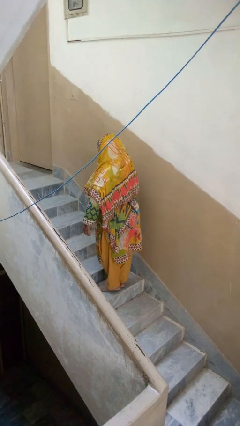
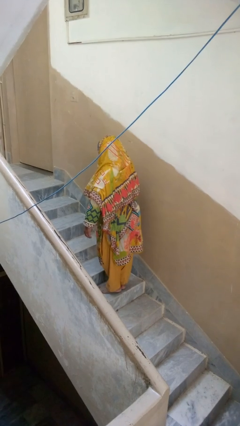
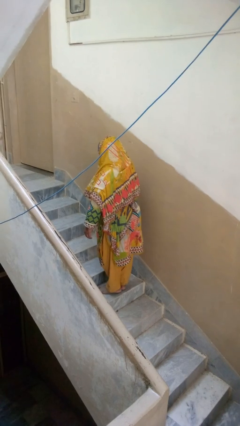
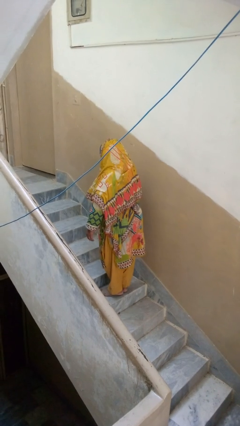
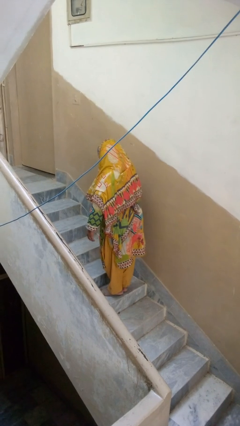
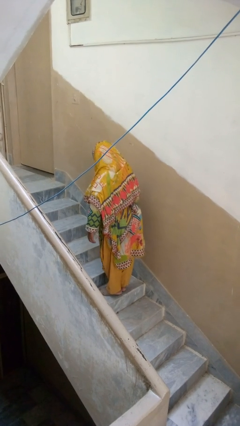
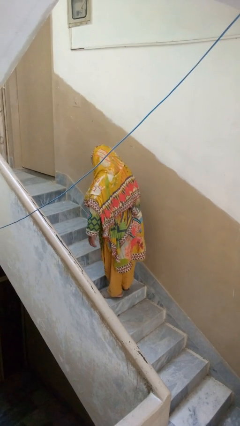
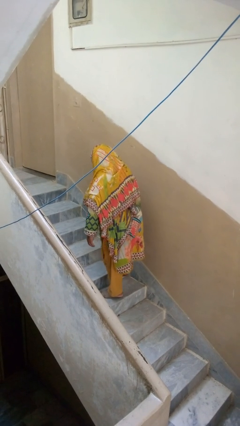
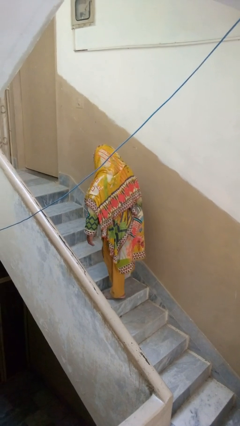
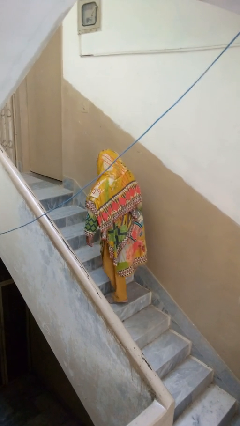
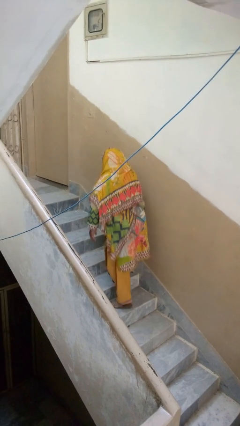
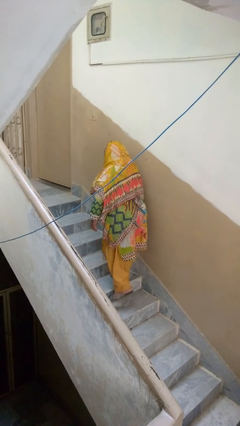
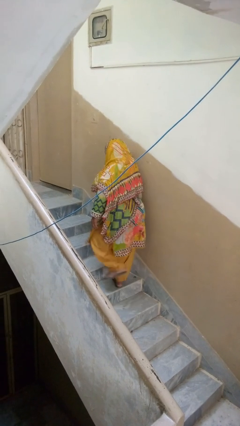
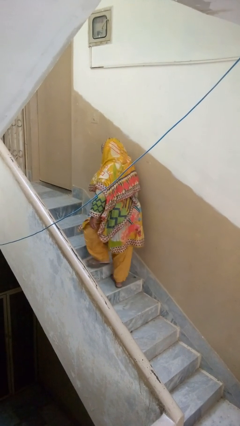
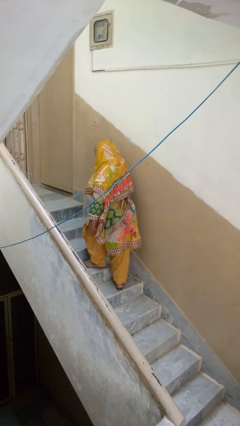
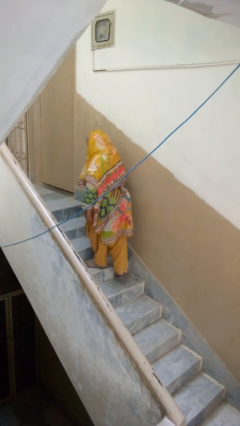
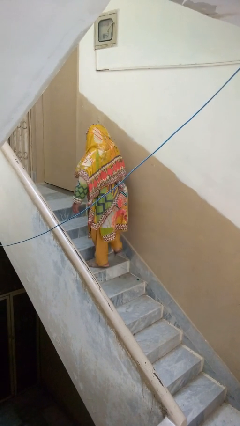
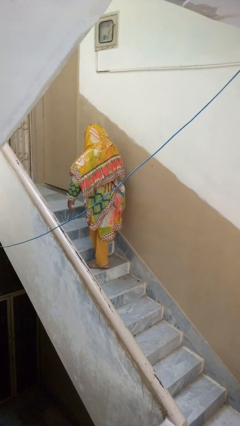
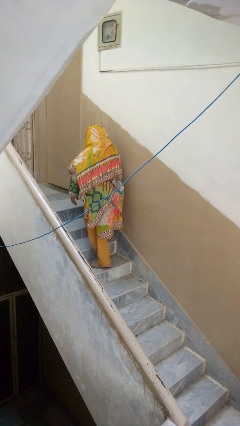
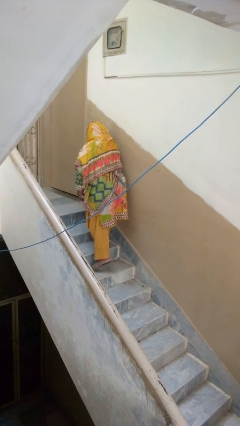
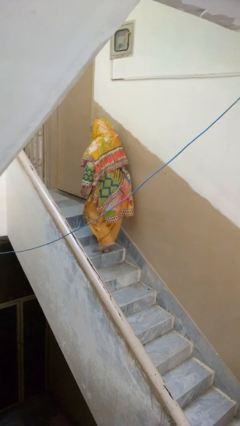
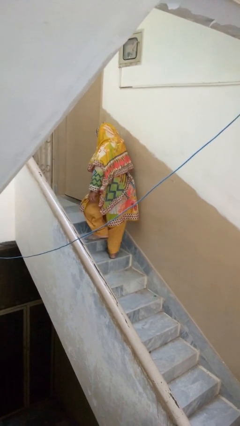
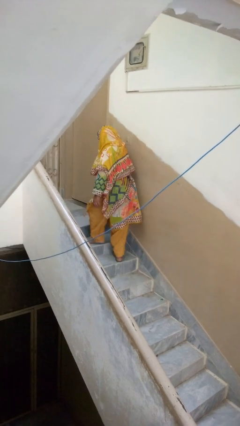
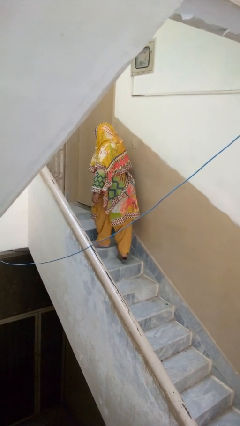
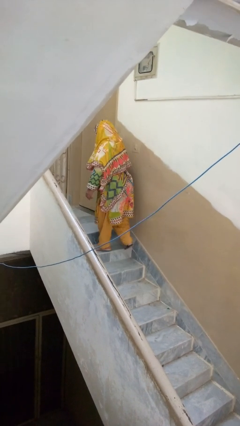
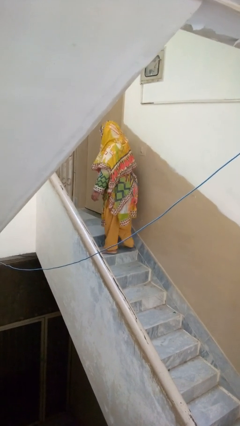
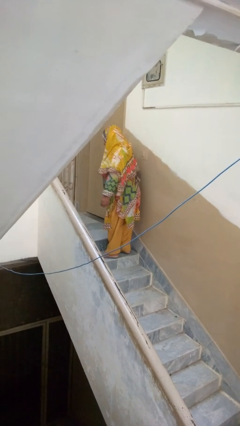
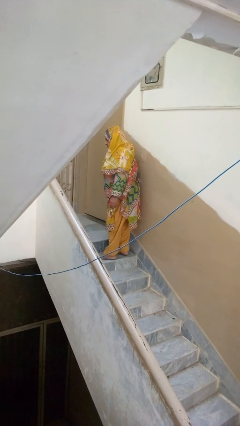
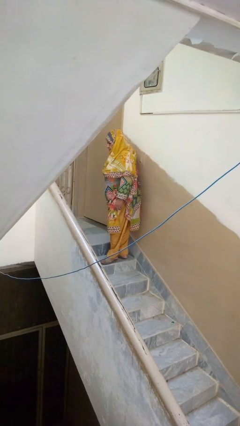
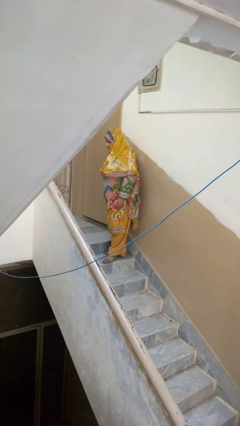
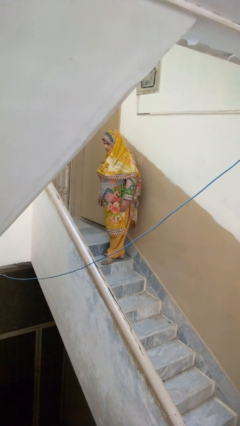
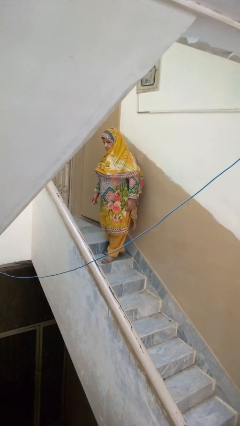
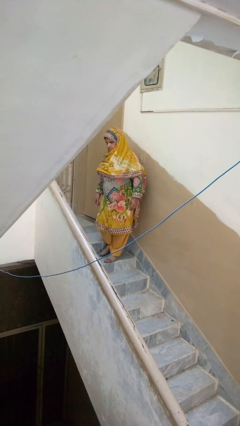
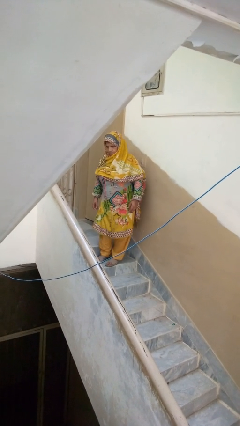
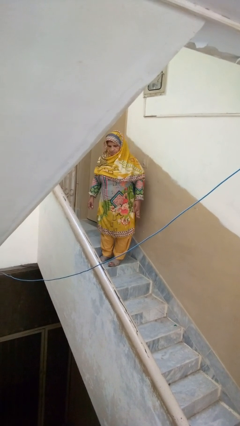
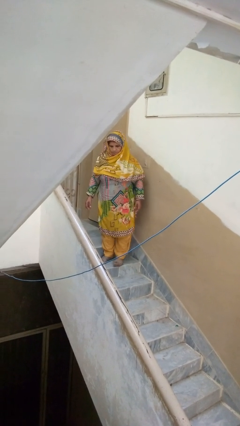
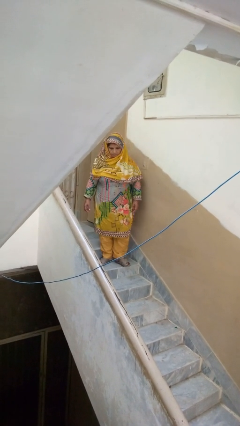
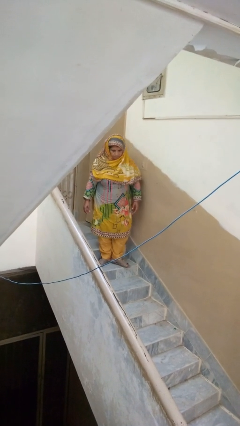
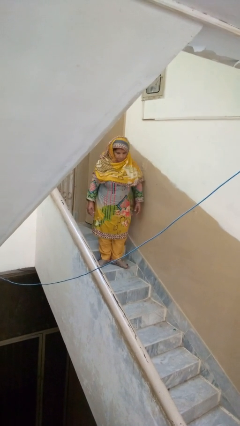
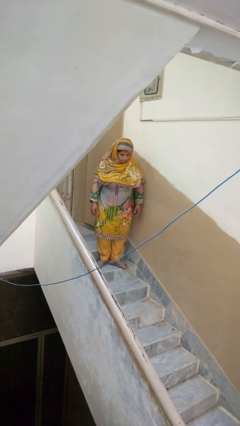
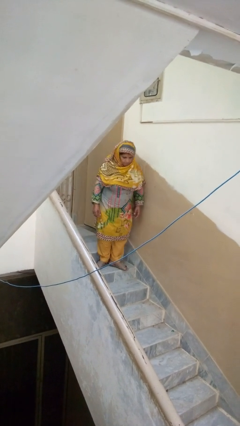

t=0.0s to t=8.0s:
person climbs up stairs

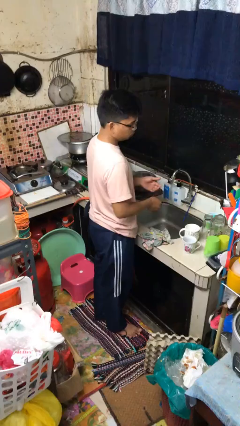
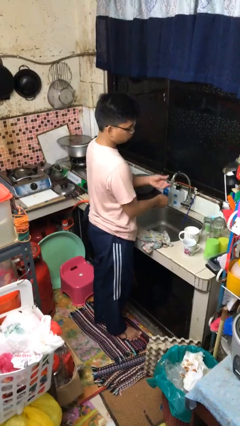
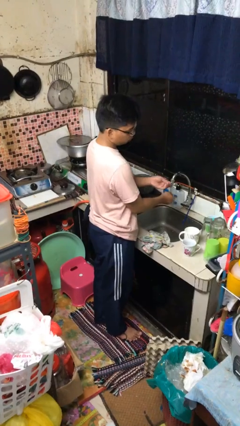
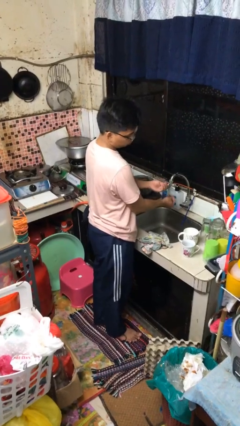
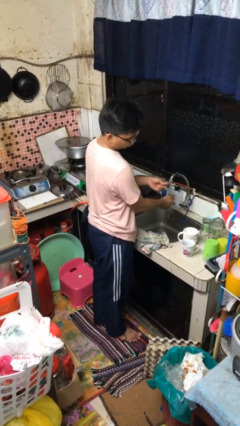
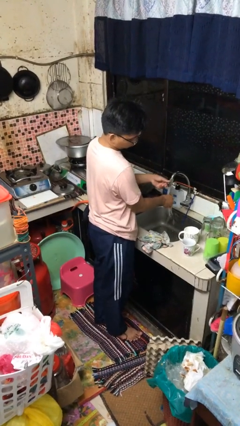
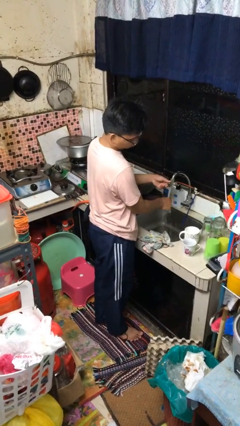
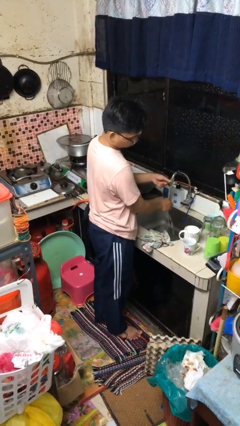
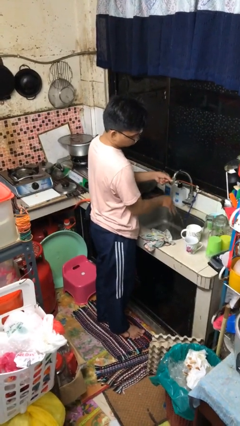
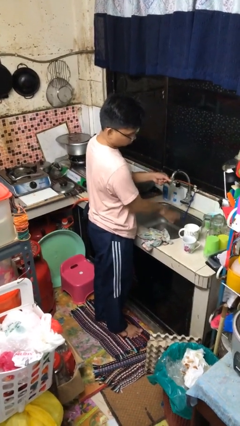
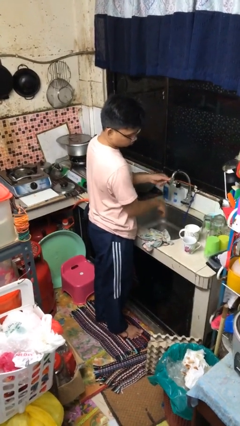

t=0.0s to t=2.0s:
person washes hands

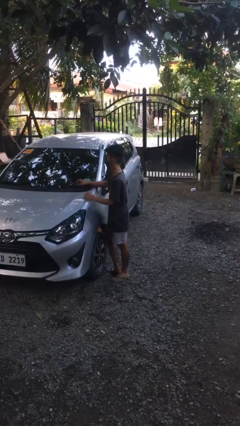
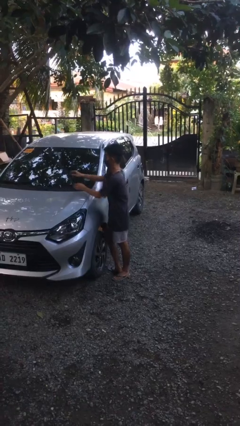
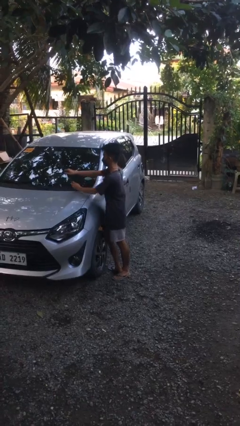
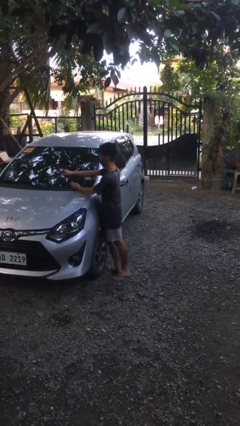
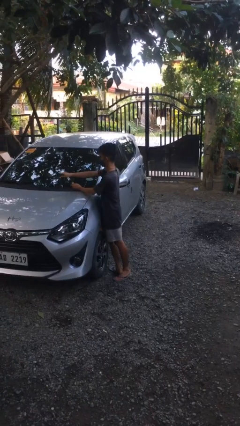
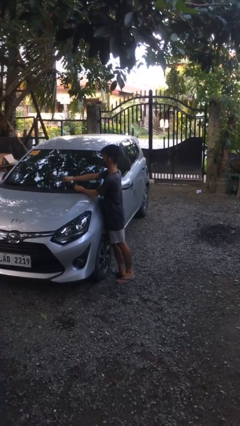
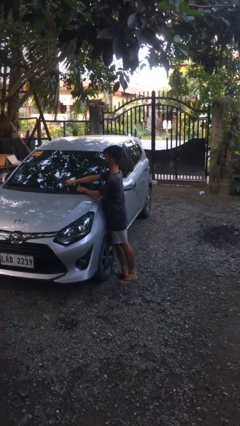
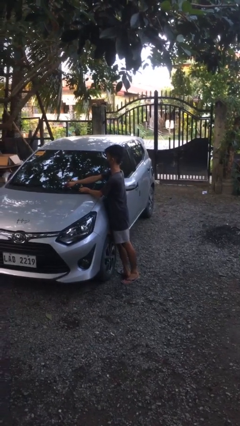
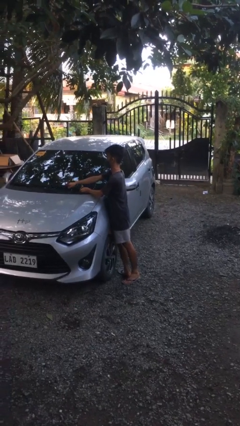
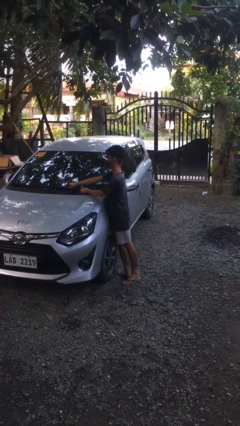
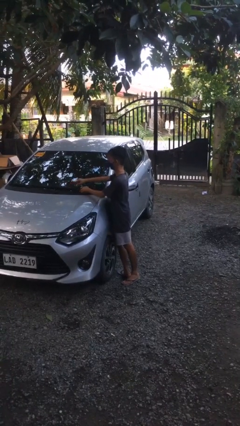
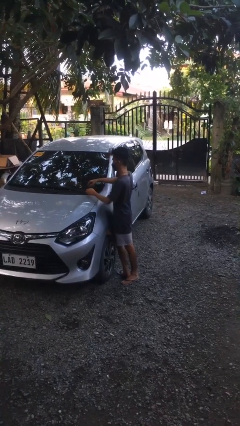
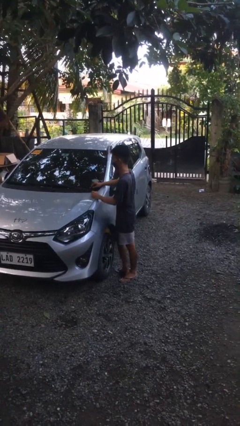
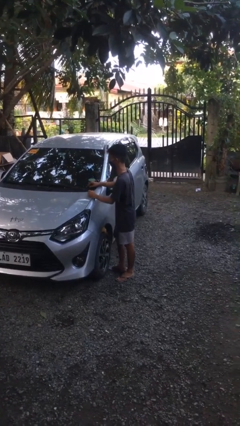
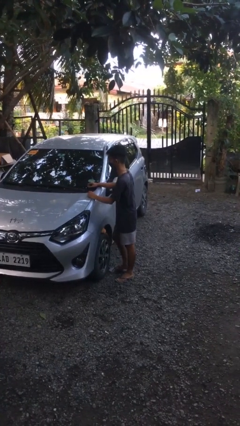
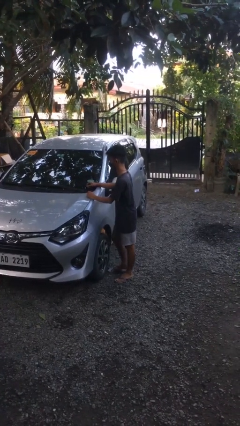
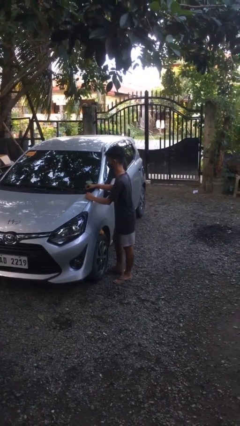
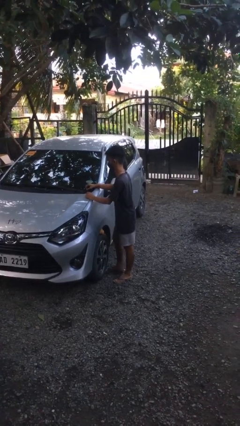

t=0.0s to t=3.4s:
person flips down car wipers

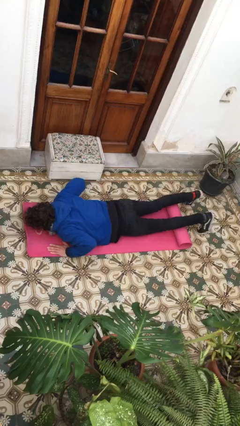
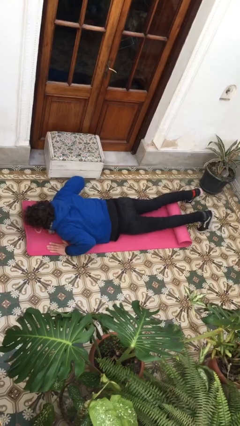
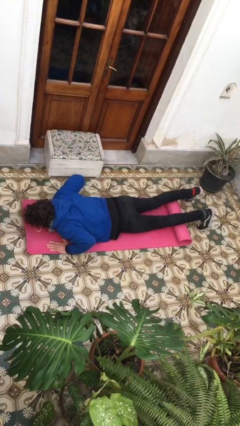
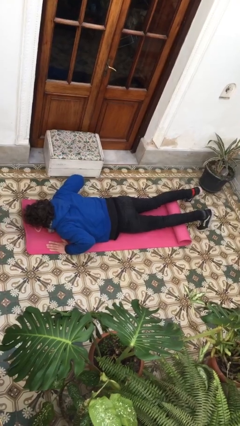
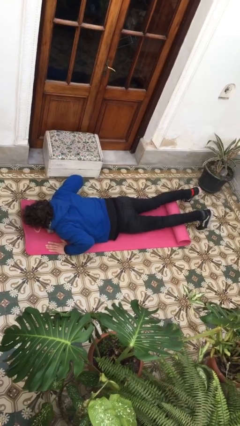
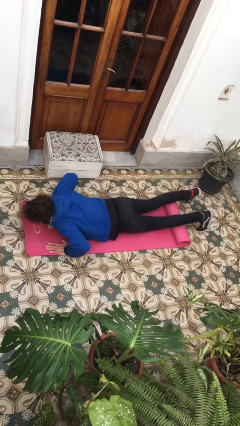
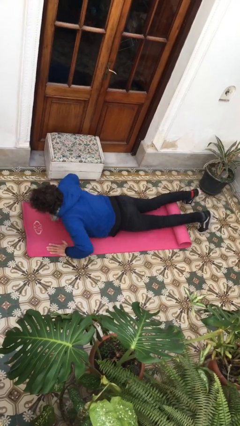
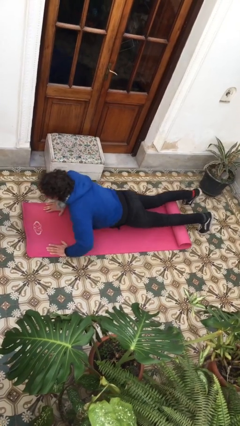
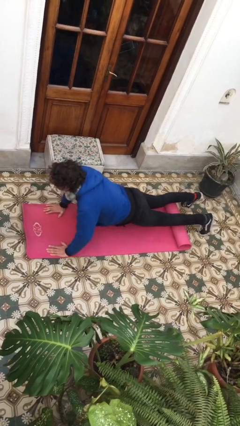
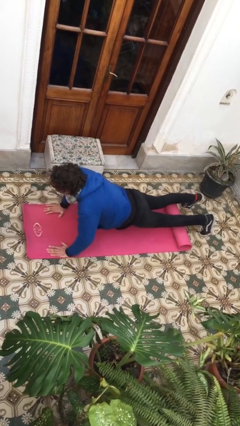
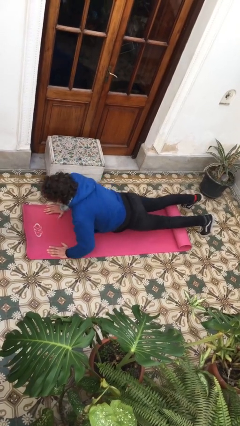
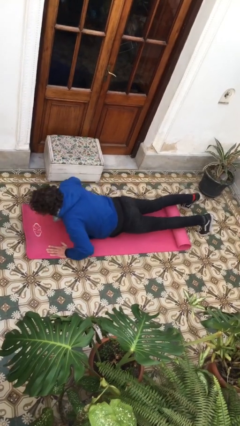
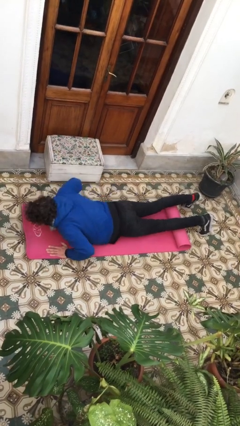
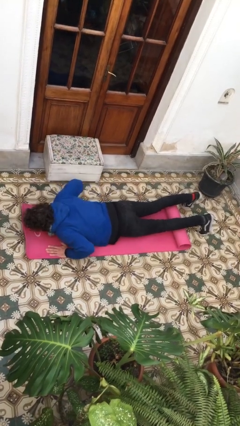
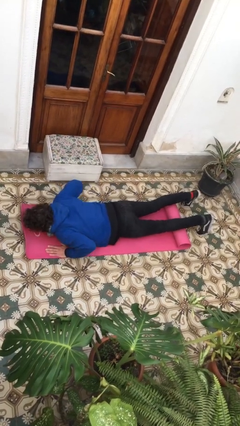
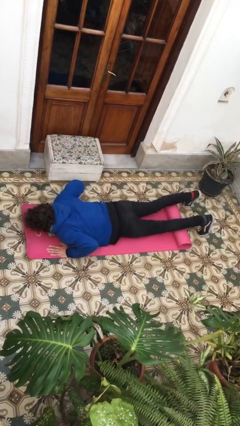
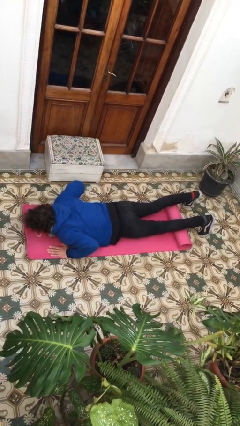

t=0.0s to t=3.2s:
person exercises with pushup

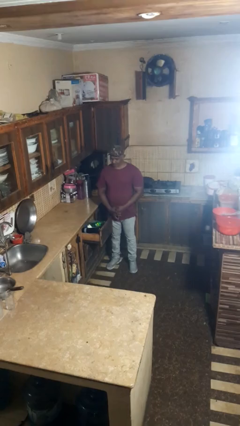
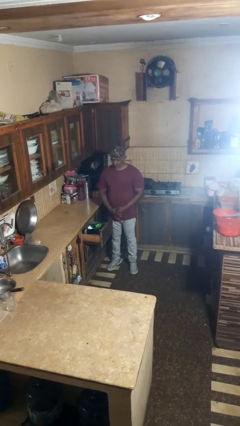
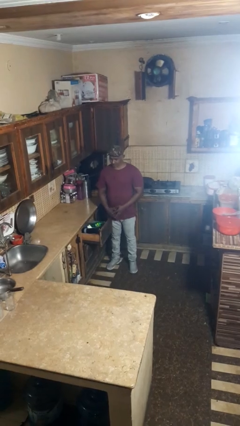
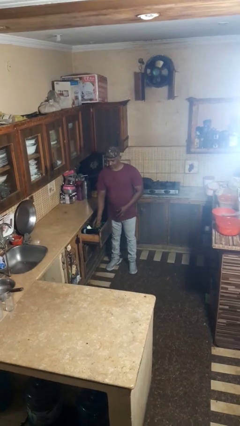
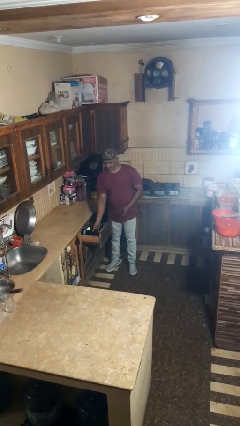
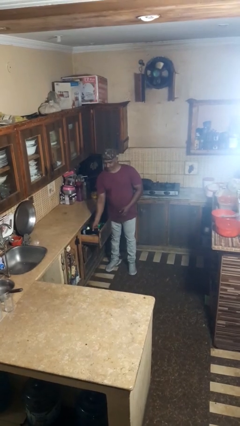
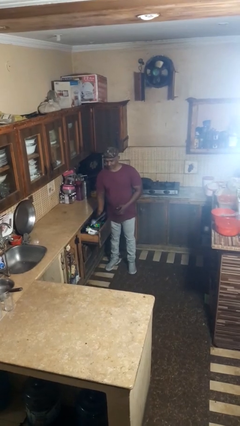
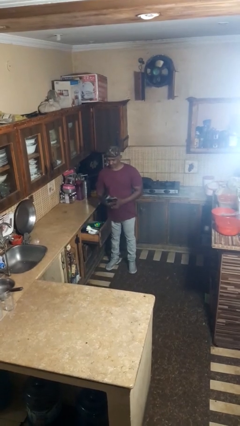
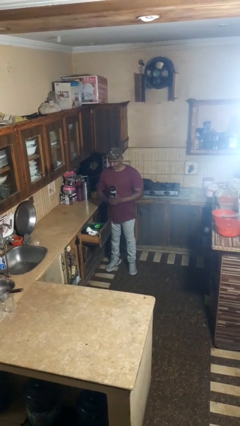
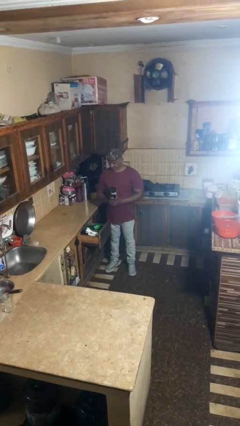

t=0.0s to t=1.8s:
person takes object from kitchen drawer
